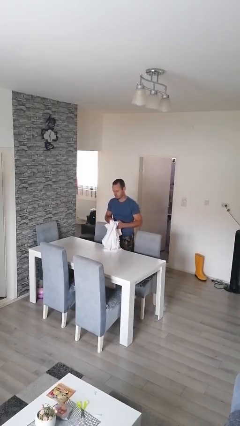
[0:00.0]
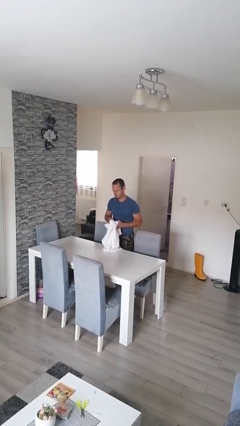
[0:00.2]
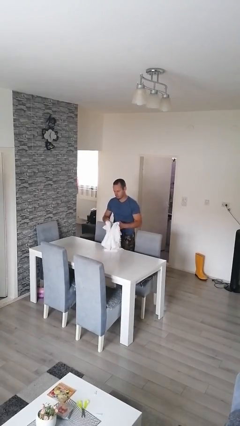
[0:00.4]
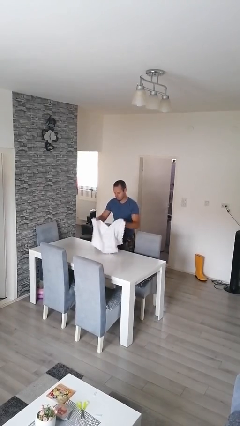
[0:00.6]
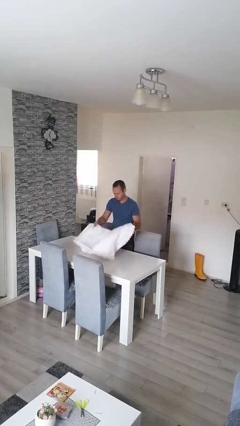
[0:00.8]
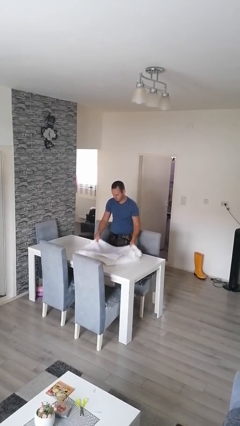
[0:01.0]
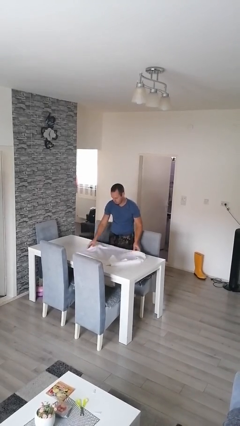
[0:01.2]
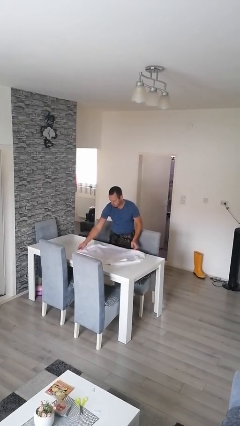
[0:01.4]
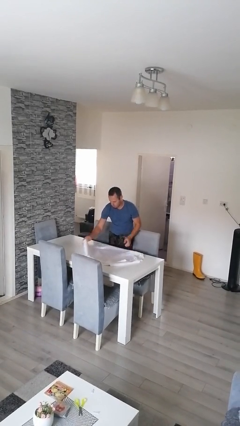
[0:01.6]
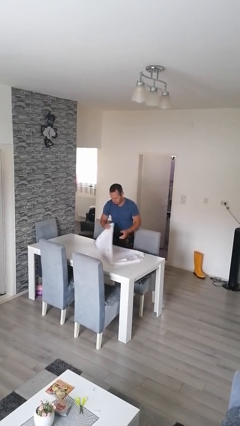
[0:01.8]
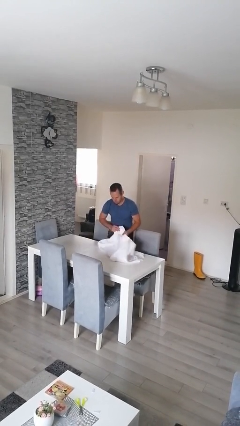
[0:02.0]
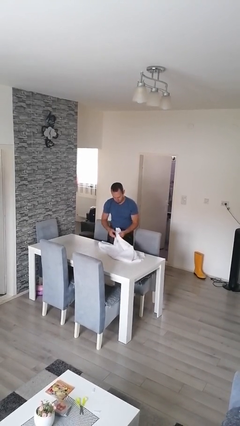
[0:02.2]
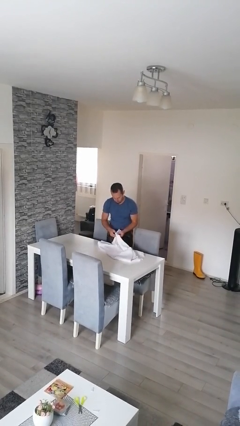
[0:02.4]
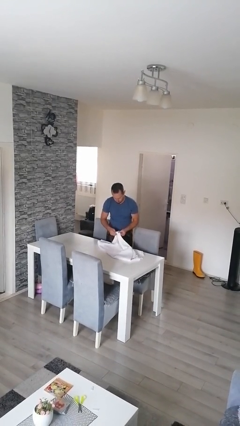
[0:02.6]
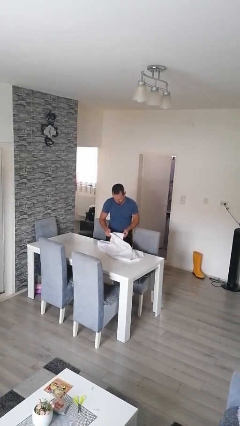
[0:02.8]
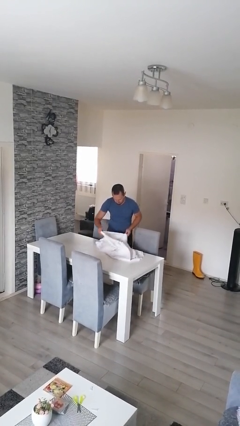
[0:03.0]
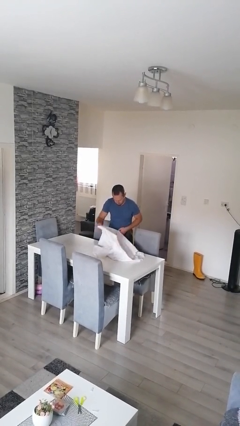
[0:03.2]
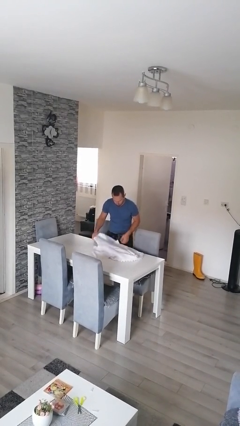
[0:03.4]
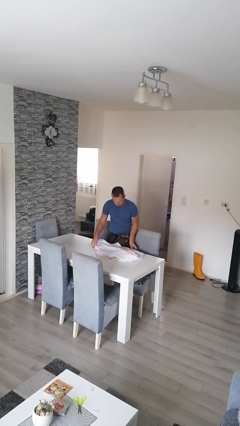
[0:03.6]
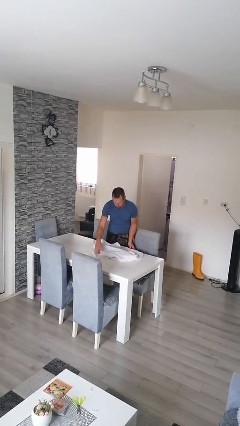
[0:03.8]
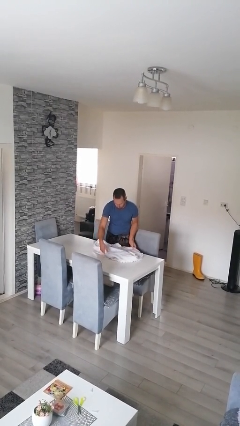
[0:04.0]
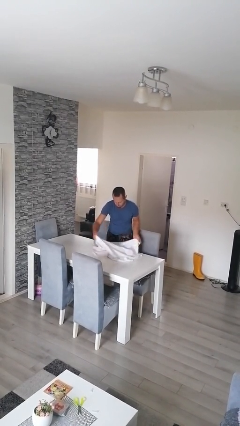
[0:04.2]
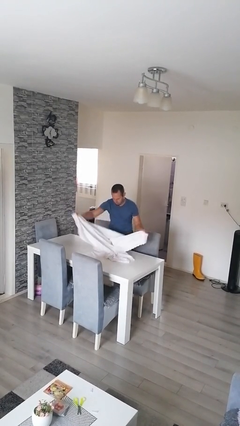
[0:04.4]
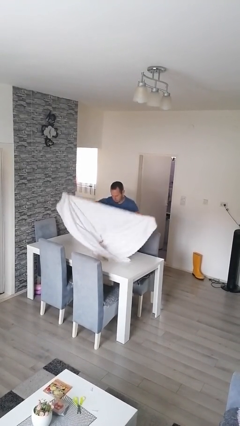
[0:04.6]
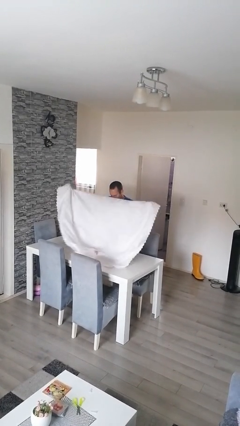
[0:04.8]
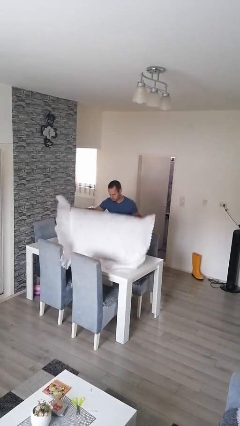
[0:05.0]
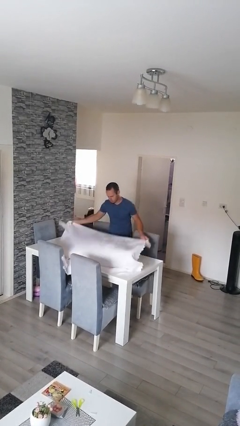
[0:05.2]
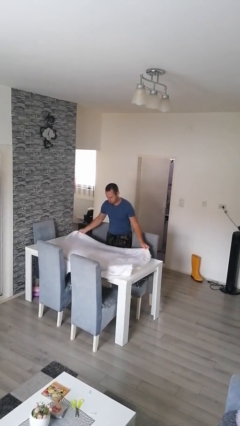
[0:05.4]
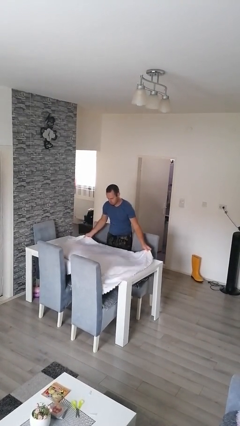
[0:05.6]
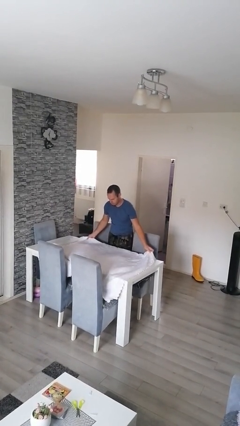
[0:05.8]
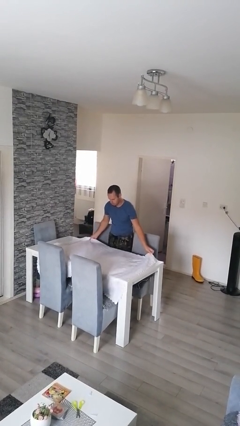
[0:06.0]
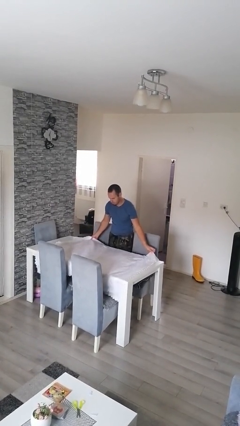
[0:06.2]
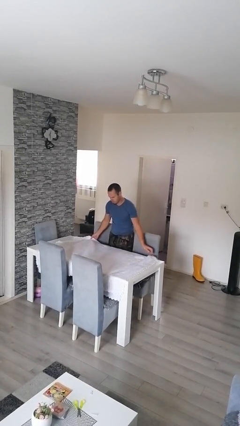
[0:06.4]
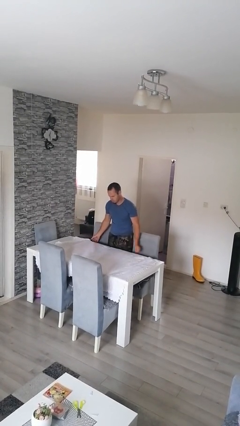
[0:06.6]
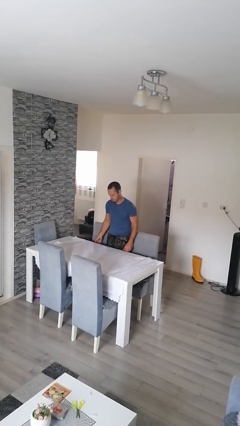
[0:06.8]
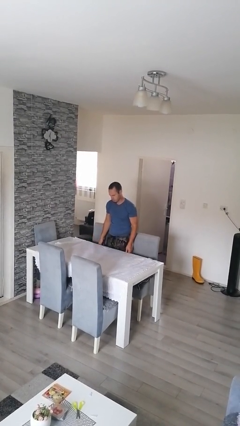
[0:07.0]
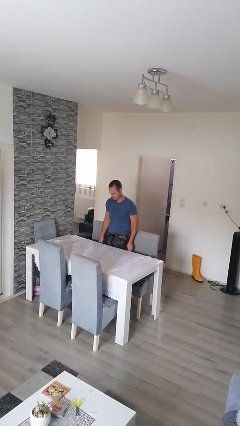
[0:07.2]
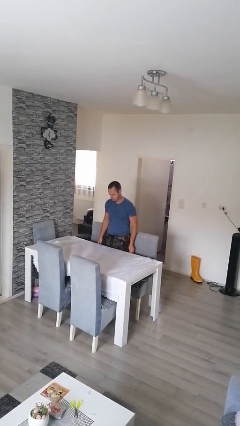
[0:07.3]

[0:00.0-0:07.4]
person spreads tablecloth

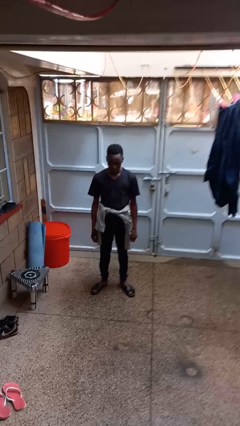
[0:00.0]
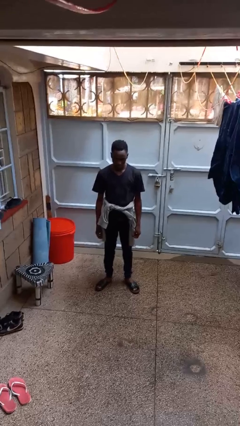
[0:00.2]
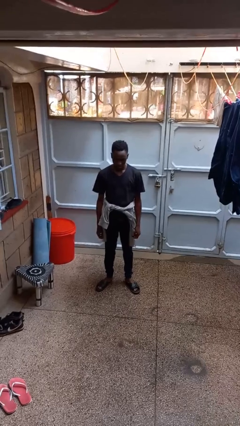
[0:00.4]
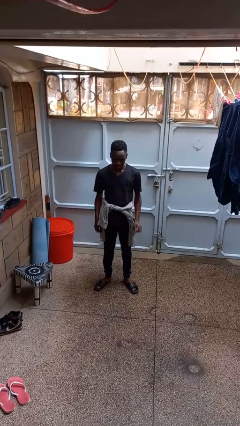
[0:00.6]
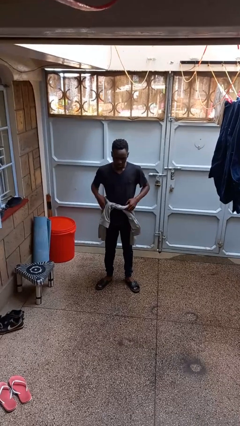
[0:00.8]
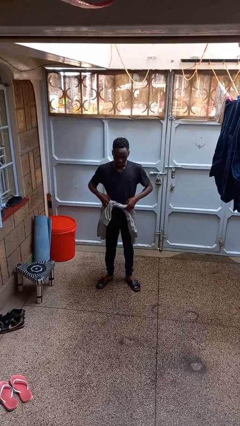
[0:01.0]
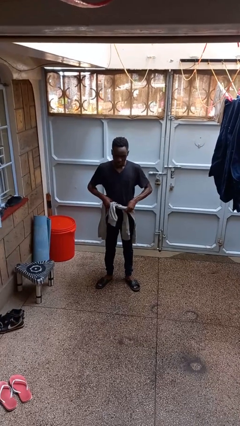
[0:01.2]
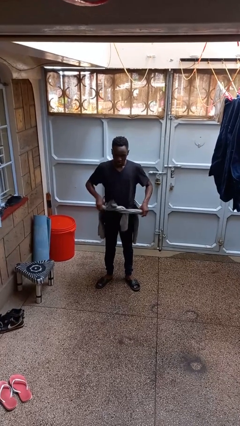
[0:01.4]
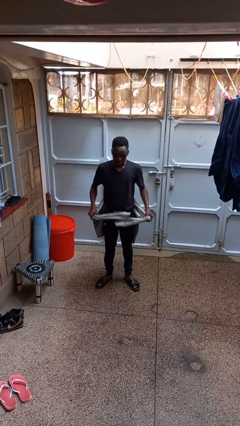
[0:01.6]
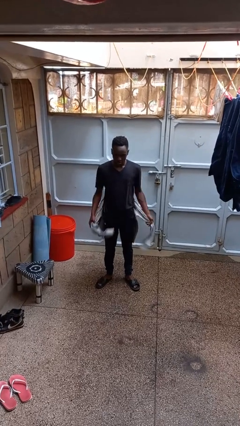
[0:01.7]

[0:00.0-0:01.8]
person unties jacket around waist

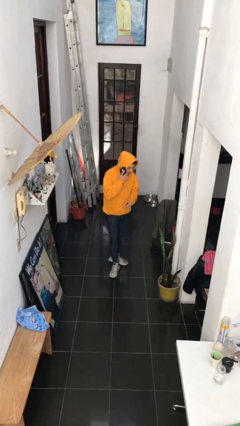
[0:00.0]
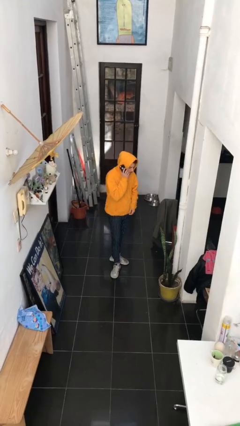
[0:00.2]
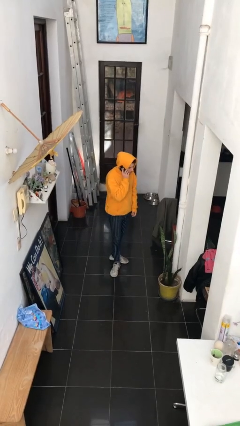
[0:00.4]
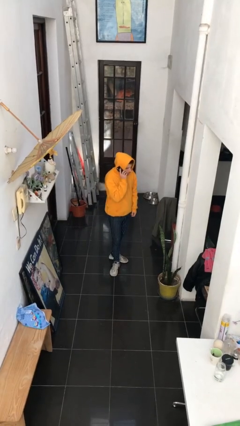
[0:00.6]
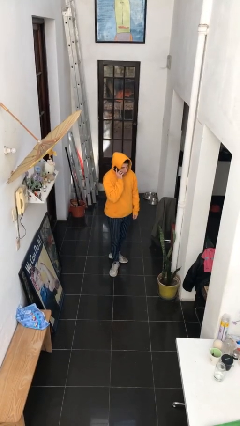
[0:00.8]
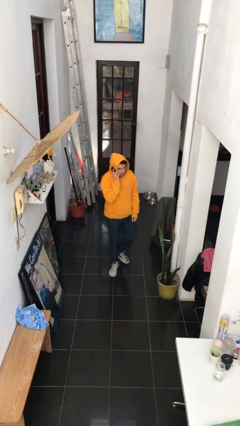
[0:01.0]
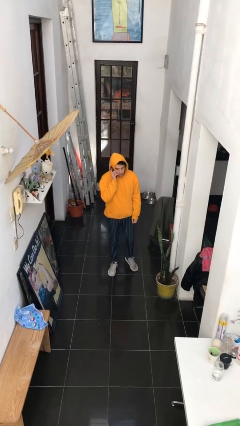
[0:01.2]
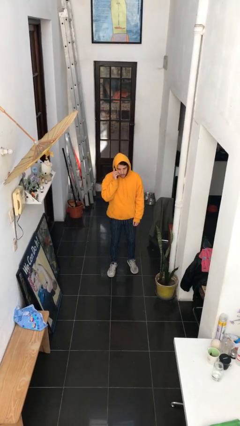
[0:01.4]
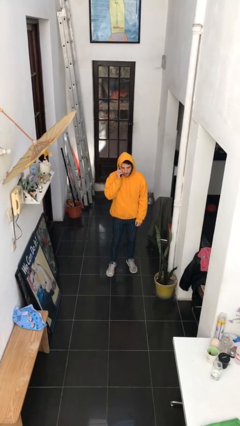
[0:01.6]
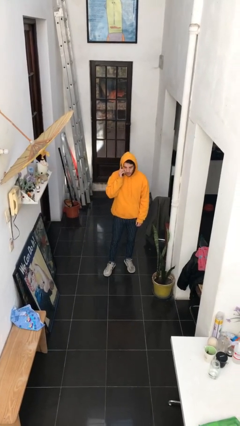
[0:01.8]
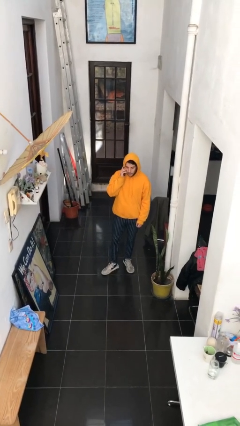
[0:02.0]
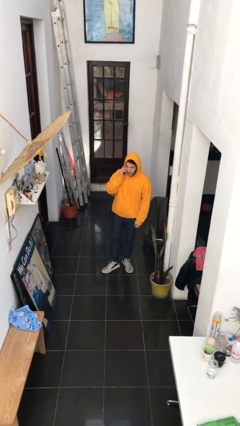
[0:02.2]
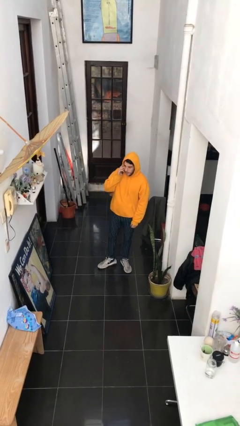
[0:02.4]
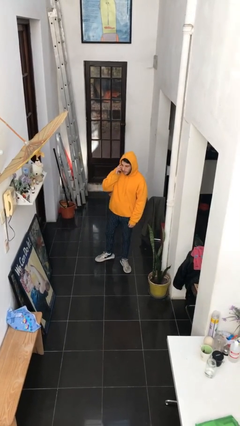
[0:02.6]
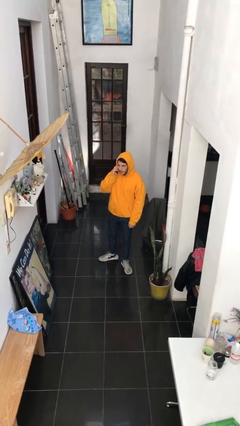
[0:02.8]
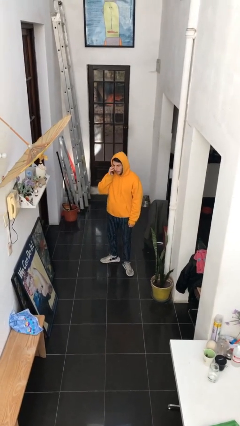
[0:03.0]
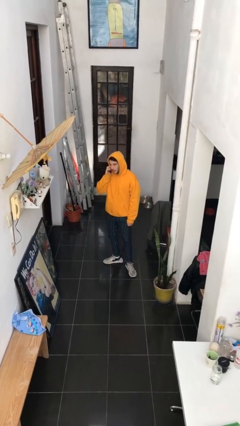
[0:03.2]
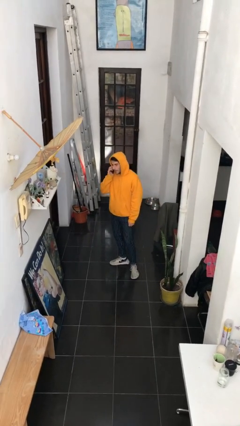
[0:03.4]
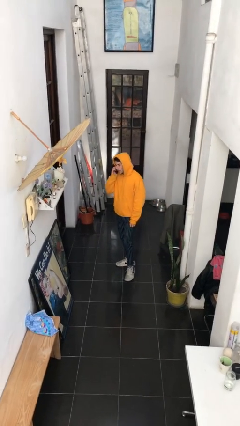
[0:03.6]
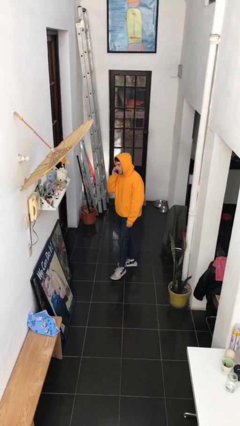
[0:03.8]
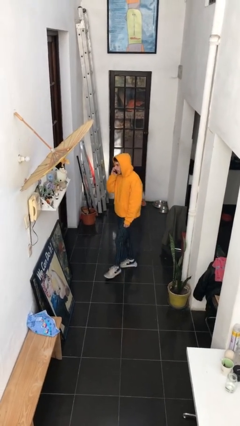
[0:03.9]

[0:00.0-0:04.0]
person talks on phone

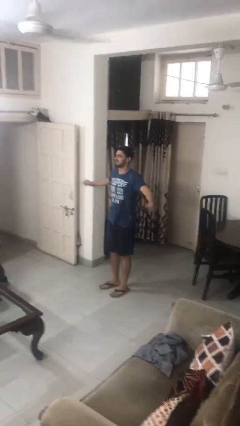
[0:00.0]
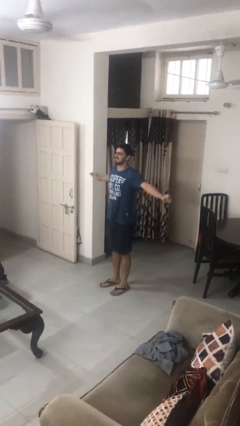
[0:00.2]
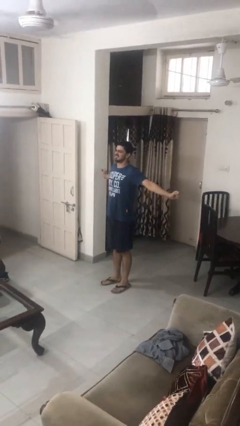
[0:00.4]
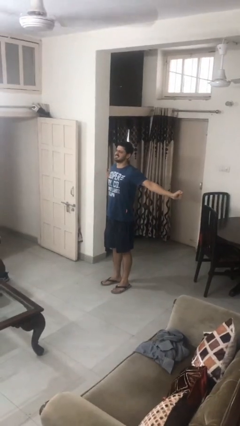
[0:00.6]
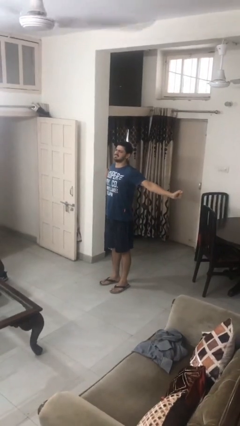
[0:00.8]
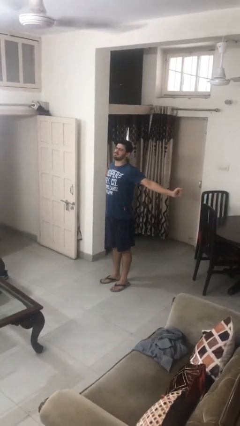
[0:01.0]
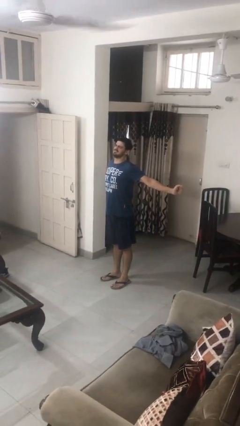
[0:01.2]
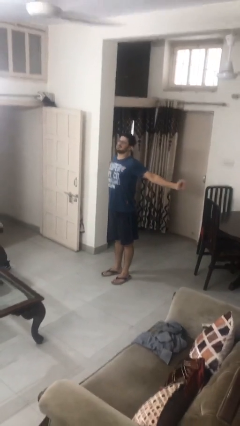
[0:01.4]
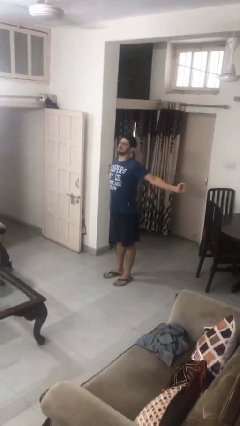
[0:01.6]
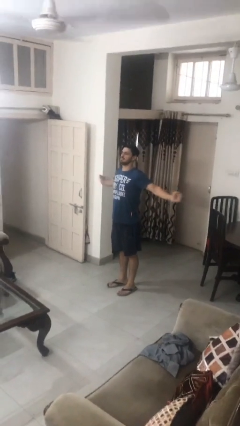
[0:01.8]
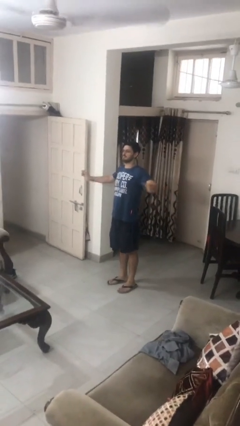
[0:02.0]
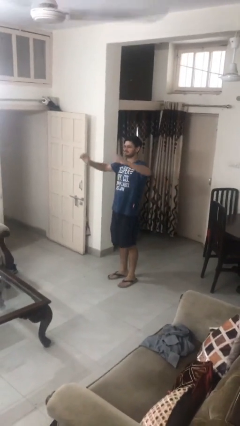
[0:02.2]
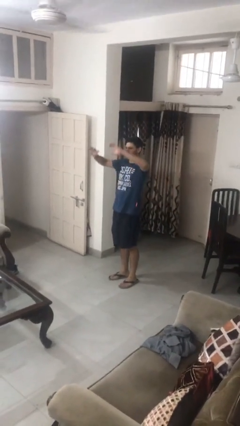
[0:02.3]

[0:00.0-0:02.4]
person stretches arms to side

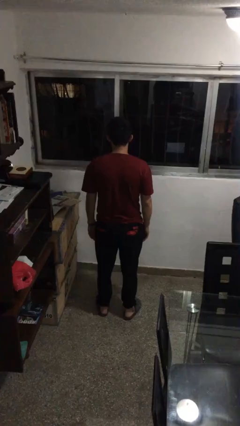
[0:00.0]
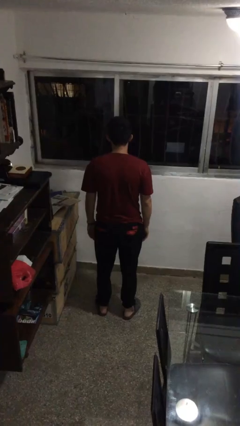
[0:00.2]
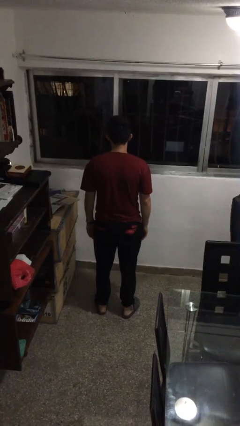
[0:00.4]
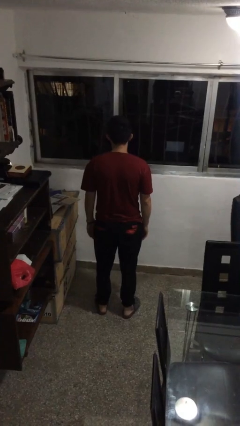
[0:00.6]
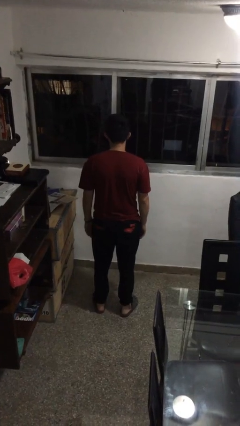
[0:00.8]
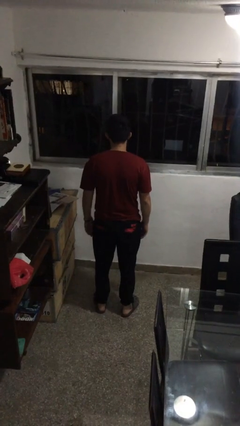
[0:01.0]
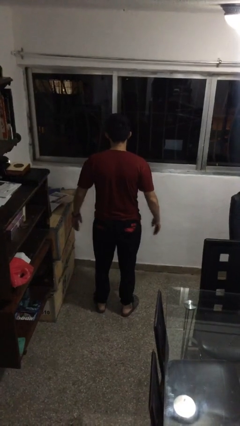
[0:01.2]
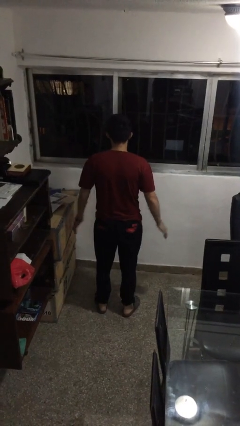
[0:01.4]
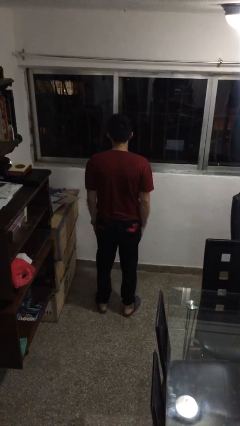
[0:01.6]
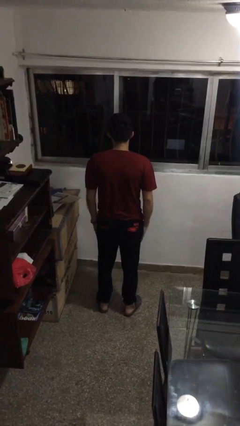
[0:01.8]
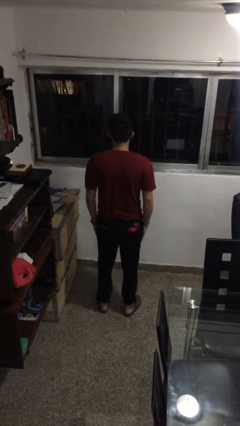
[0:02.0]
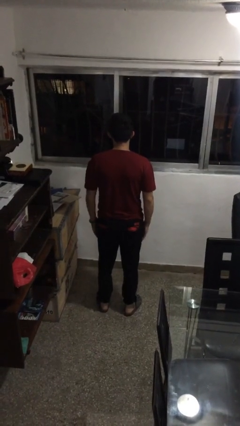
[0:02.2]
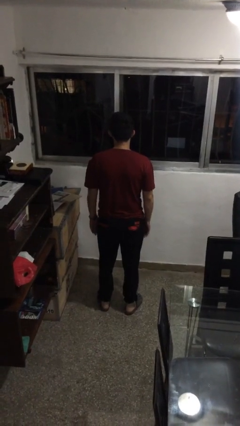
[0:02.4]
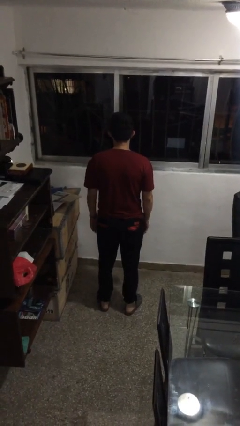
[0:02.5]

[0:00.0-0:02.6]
person slaps hands on thighs
